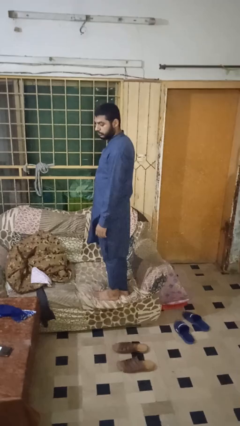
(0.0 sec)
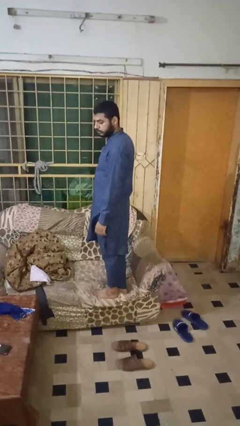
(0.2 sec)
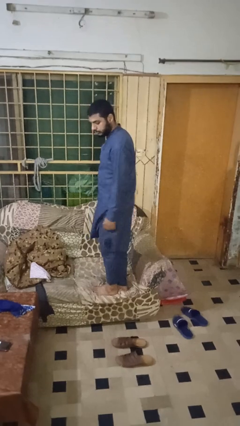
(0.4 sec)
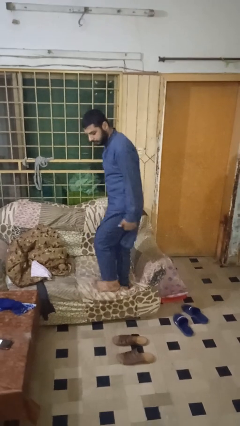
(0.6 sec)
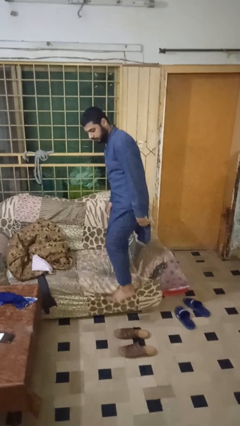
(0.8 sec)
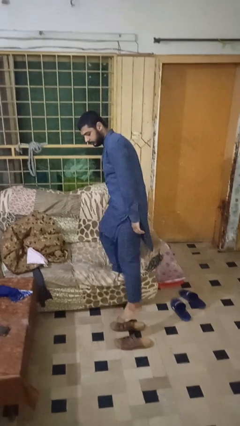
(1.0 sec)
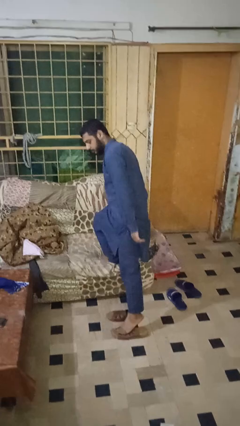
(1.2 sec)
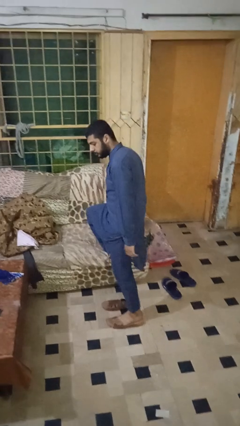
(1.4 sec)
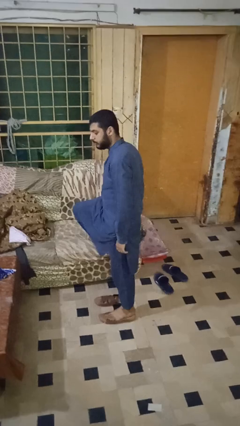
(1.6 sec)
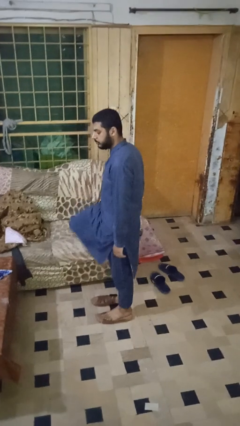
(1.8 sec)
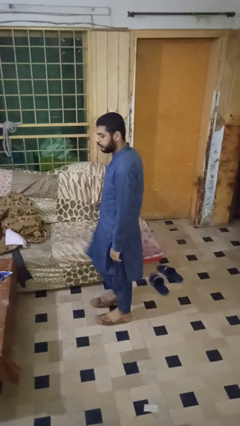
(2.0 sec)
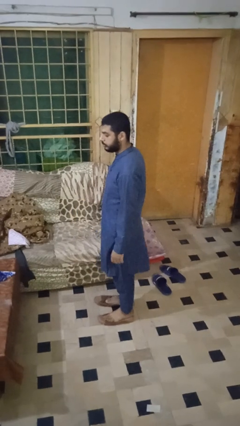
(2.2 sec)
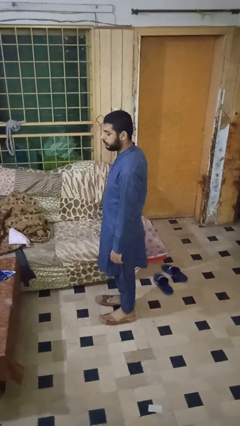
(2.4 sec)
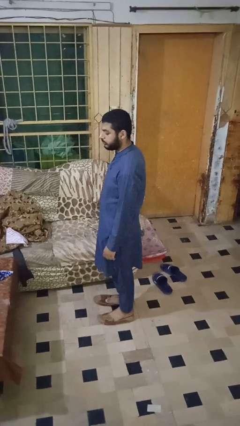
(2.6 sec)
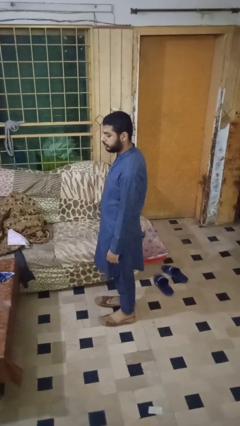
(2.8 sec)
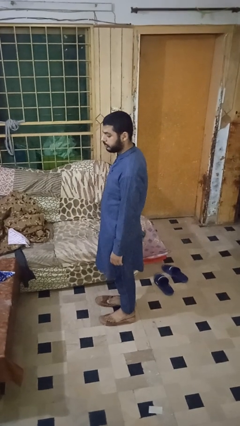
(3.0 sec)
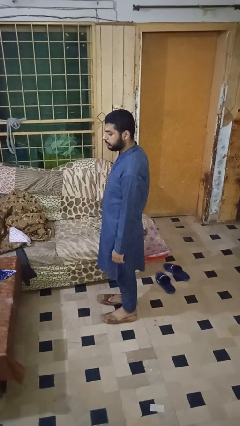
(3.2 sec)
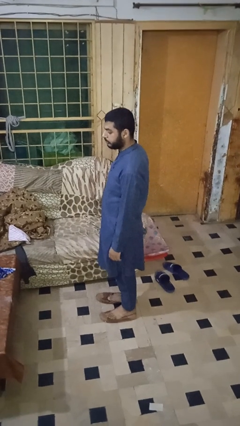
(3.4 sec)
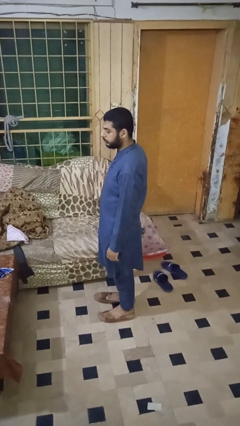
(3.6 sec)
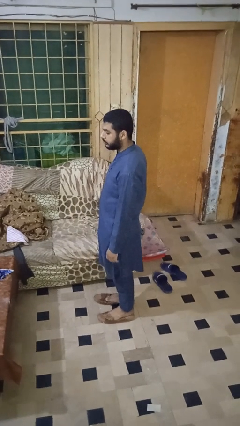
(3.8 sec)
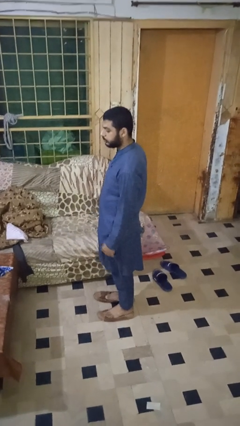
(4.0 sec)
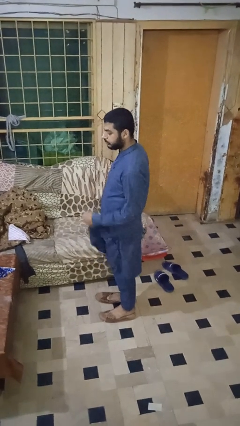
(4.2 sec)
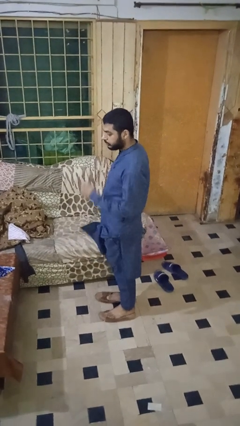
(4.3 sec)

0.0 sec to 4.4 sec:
person climbs off couch

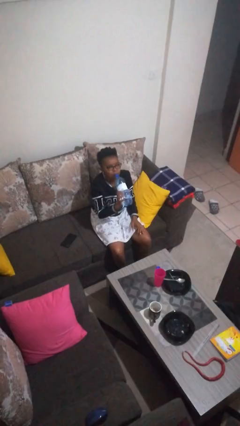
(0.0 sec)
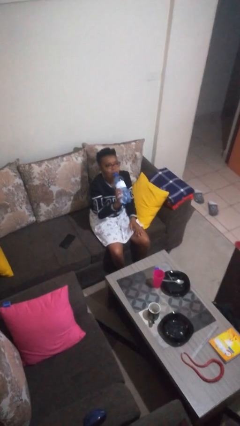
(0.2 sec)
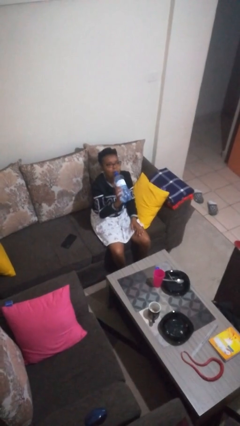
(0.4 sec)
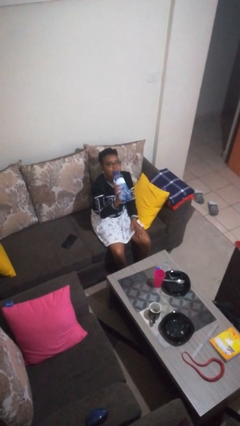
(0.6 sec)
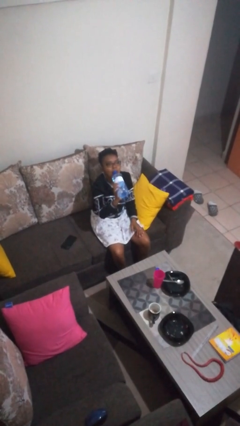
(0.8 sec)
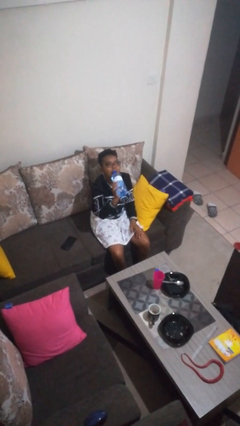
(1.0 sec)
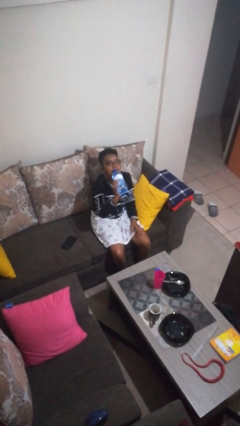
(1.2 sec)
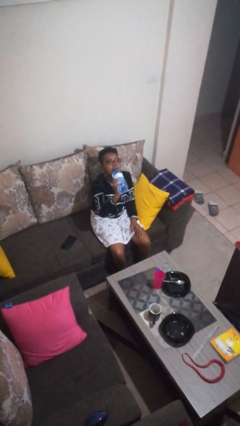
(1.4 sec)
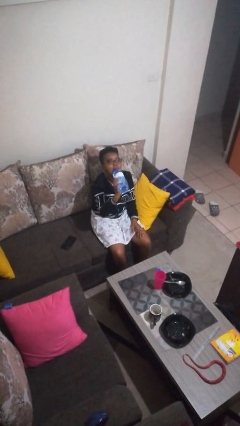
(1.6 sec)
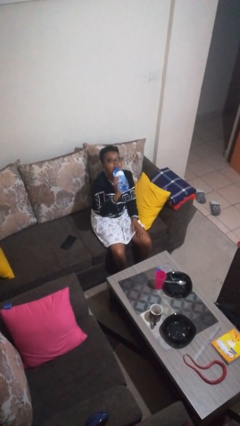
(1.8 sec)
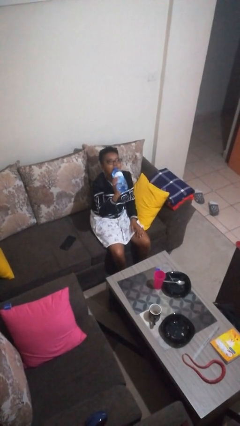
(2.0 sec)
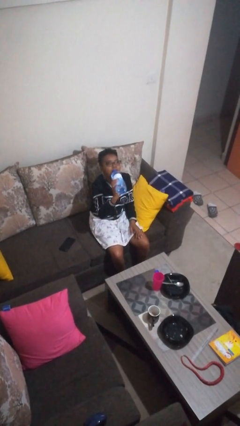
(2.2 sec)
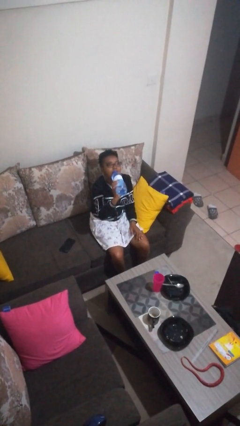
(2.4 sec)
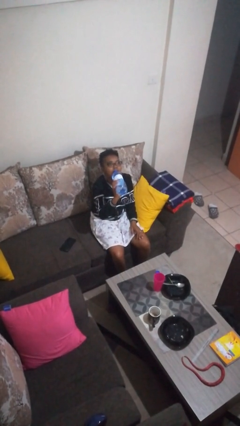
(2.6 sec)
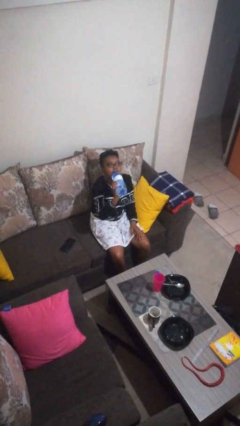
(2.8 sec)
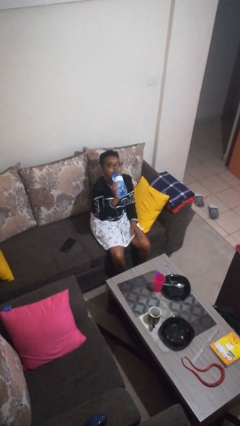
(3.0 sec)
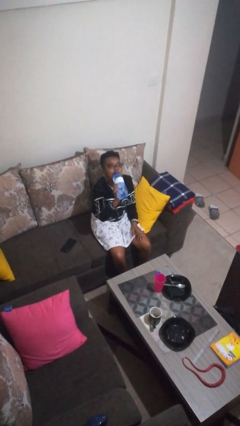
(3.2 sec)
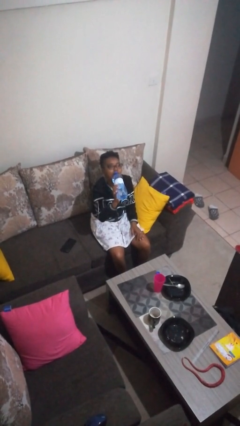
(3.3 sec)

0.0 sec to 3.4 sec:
person drinks from bottle

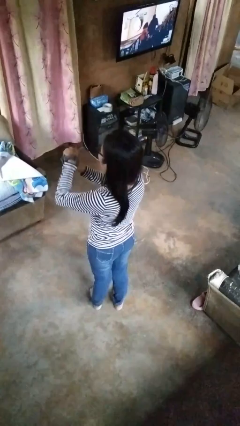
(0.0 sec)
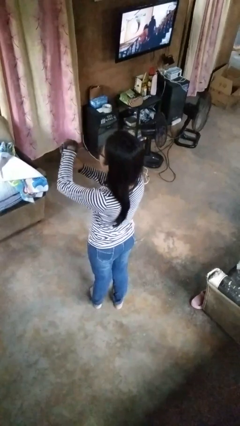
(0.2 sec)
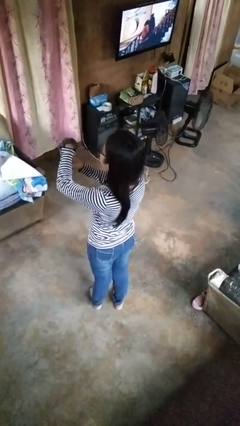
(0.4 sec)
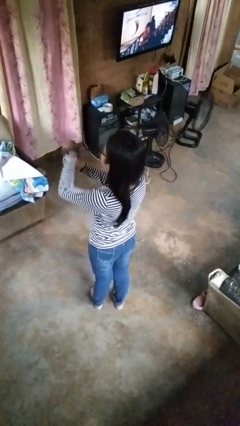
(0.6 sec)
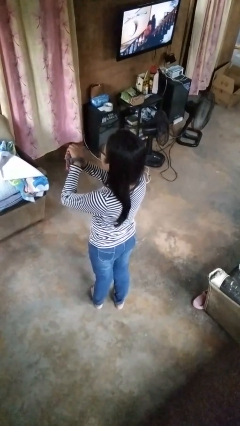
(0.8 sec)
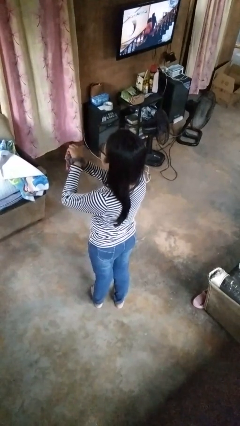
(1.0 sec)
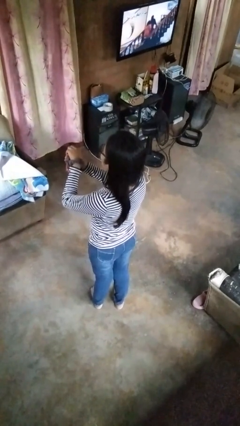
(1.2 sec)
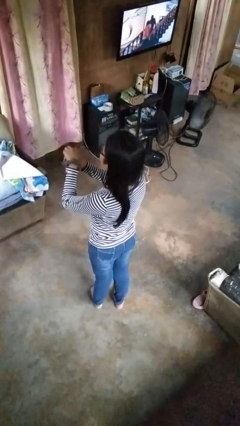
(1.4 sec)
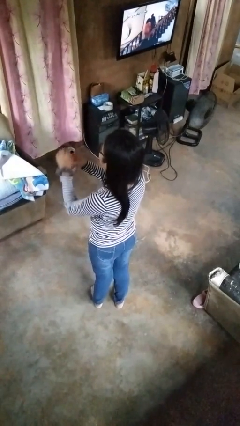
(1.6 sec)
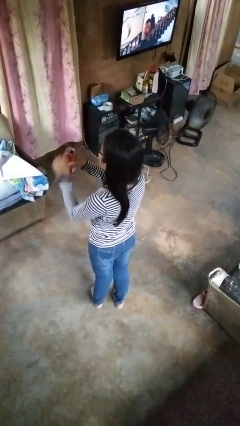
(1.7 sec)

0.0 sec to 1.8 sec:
person opens beverage can

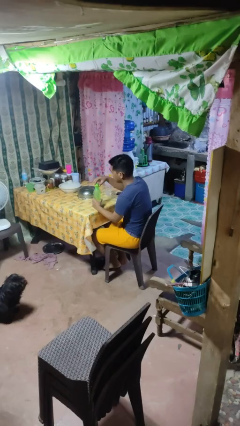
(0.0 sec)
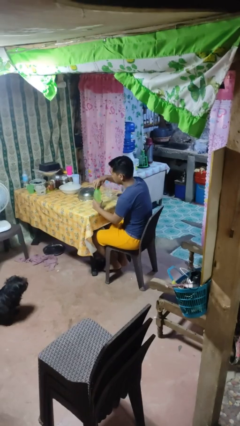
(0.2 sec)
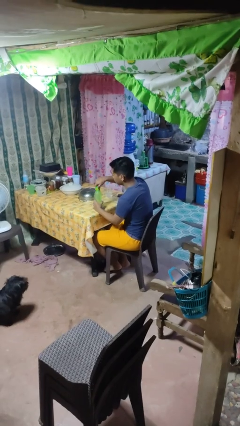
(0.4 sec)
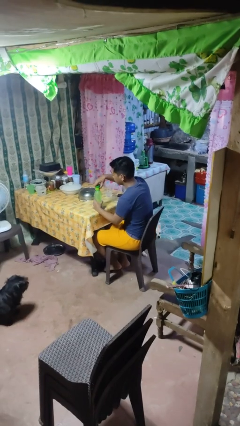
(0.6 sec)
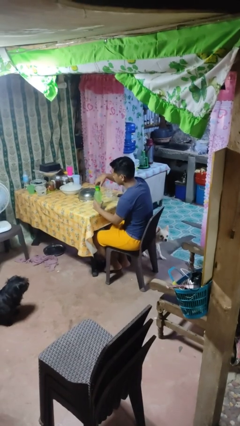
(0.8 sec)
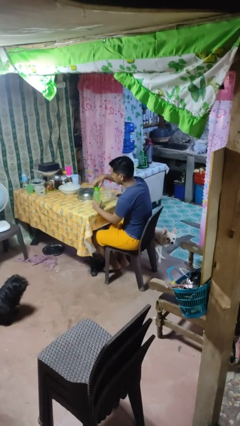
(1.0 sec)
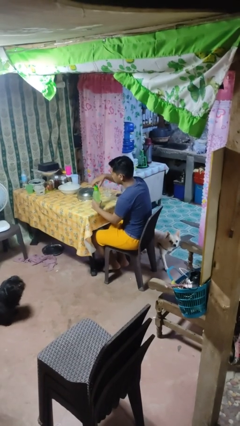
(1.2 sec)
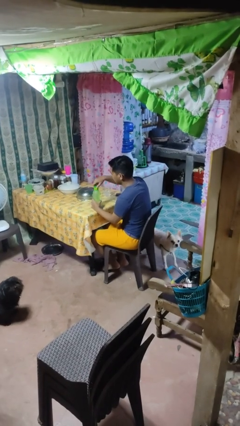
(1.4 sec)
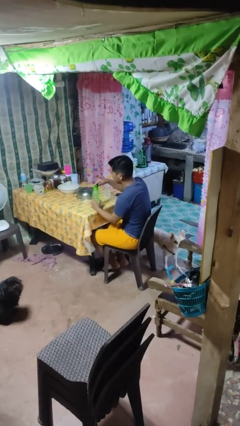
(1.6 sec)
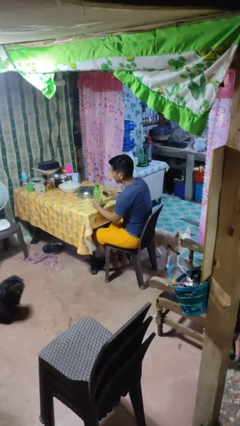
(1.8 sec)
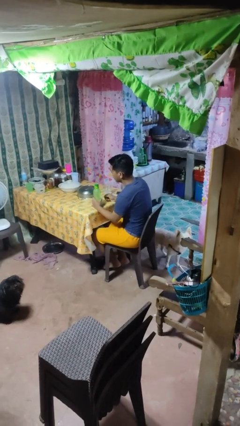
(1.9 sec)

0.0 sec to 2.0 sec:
person screws lid to bottle

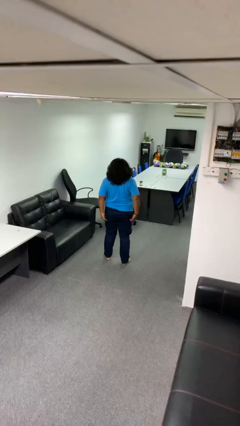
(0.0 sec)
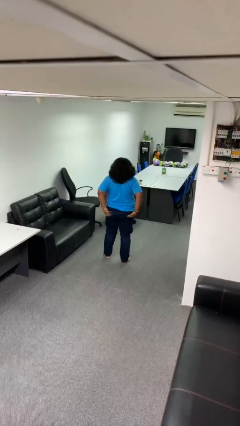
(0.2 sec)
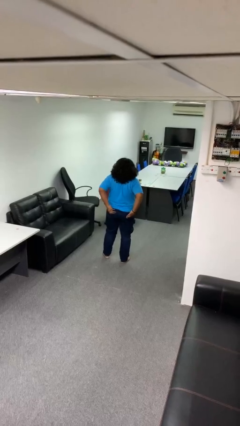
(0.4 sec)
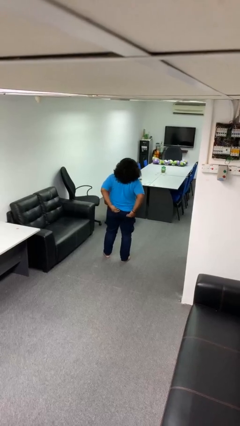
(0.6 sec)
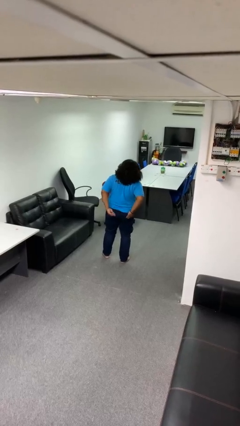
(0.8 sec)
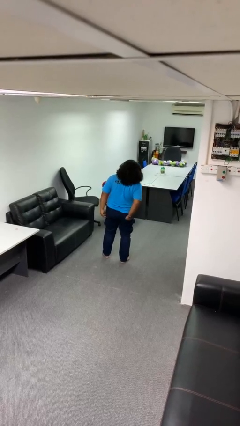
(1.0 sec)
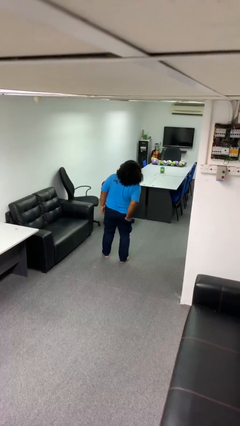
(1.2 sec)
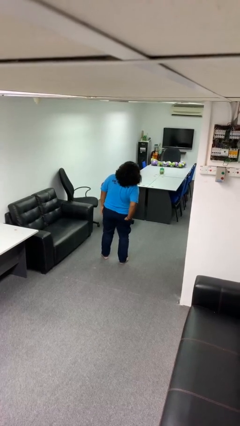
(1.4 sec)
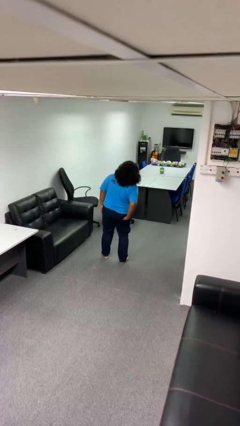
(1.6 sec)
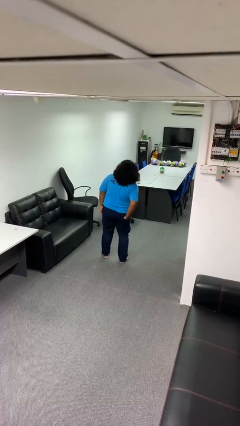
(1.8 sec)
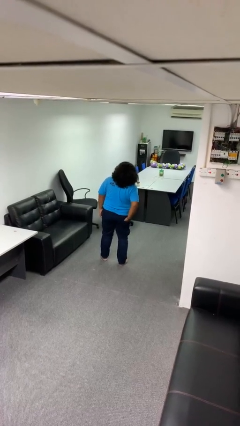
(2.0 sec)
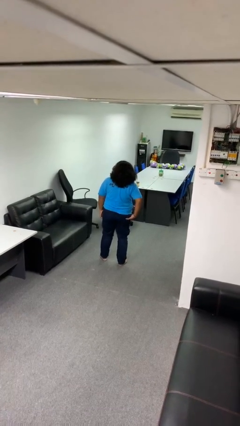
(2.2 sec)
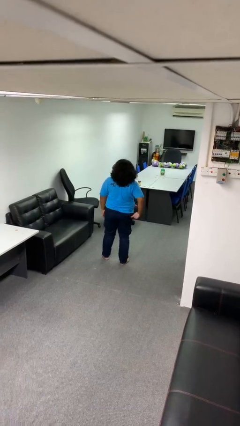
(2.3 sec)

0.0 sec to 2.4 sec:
person puts hands in back pockets

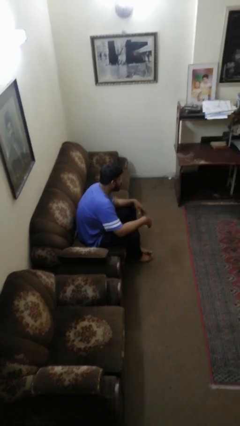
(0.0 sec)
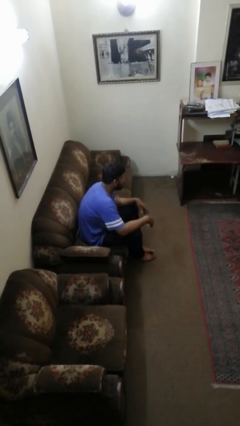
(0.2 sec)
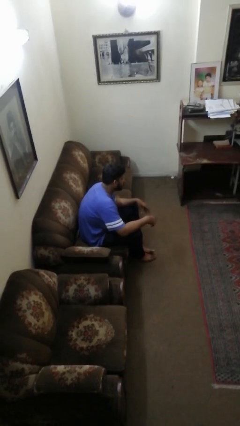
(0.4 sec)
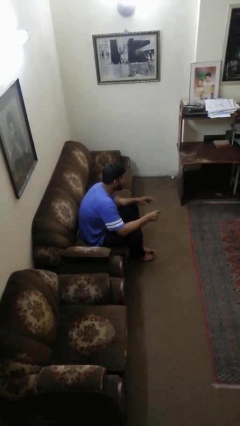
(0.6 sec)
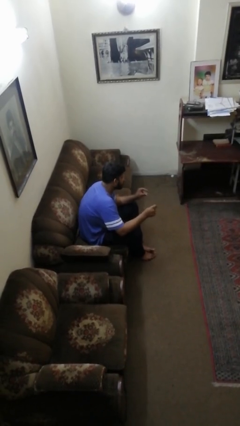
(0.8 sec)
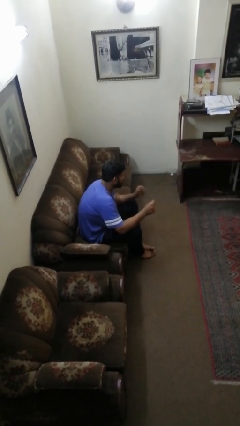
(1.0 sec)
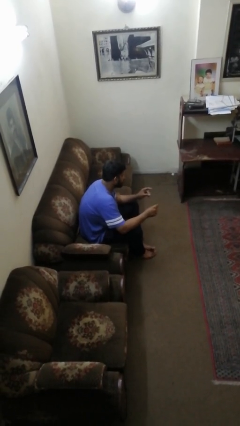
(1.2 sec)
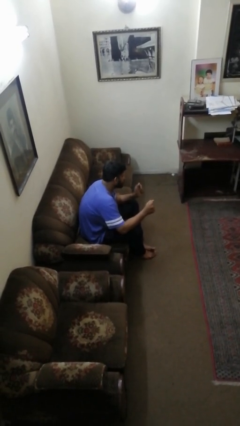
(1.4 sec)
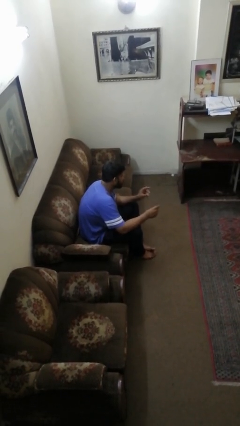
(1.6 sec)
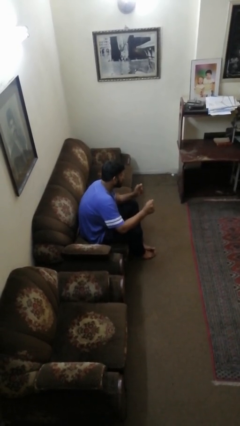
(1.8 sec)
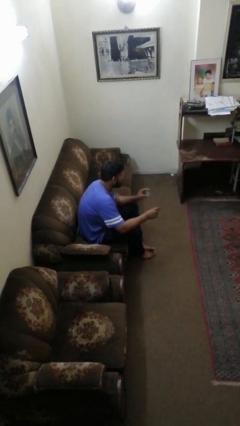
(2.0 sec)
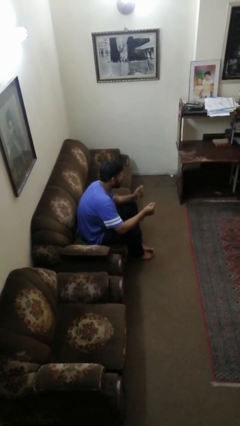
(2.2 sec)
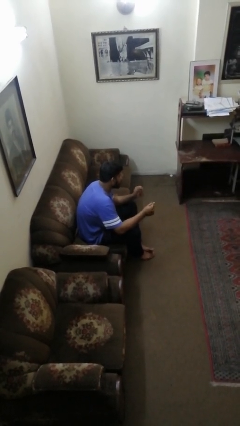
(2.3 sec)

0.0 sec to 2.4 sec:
person snaps fingers

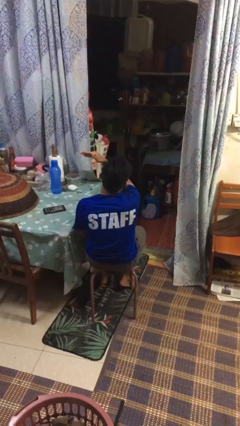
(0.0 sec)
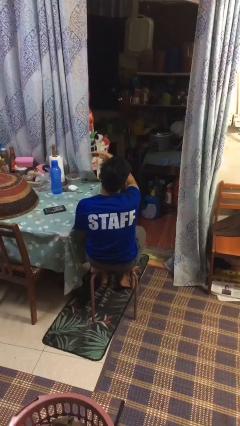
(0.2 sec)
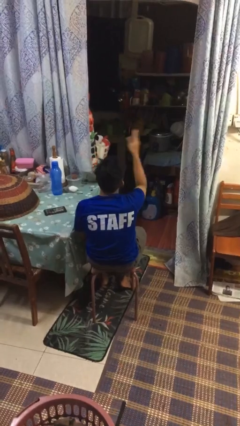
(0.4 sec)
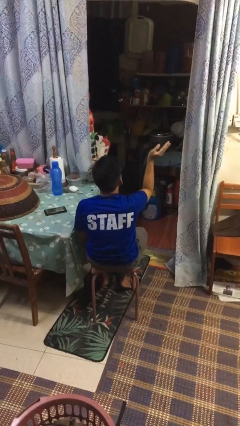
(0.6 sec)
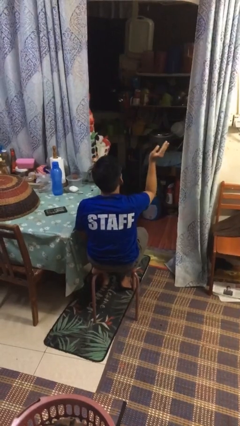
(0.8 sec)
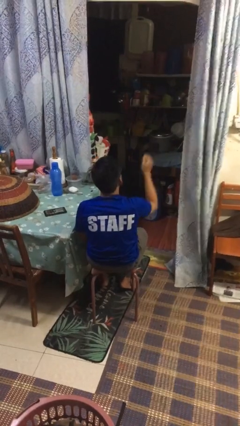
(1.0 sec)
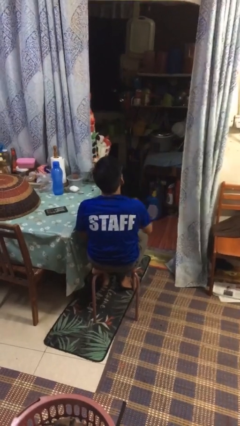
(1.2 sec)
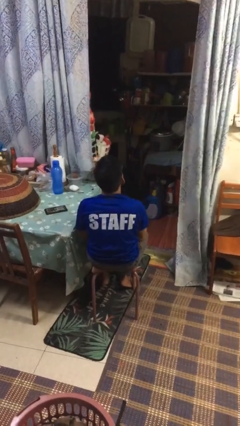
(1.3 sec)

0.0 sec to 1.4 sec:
person gestures swipe right
